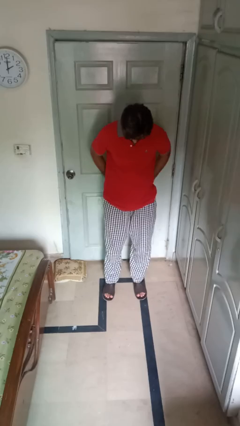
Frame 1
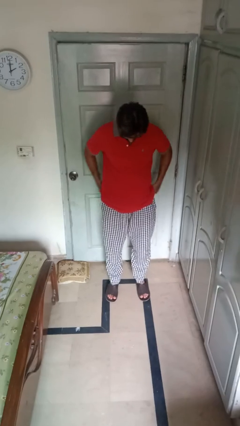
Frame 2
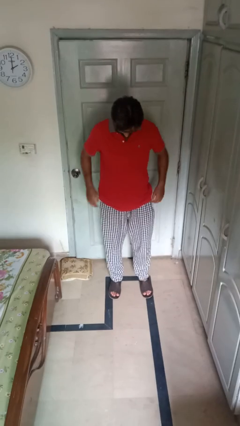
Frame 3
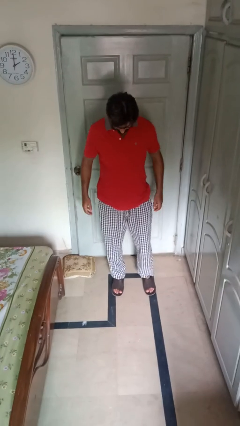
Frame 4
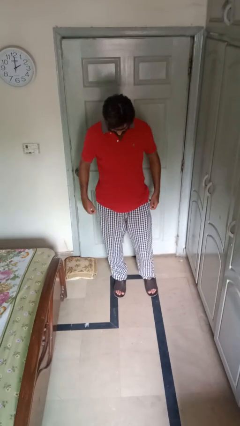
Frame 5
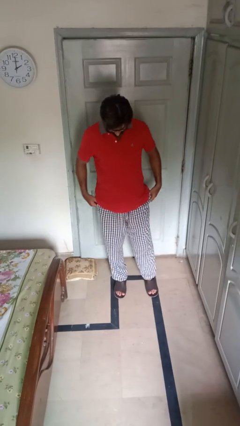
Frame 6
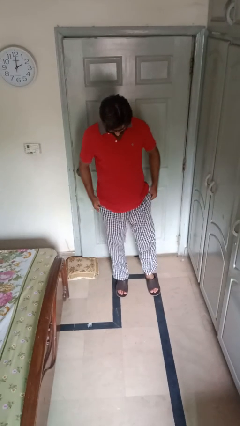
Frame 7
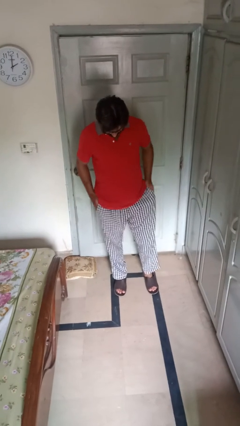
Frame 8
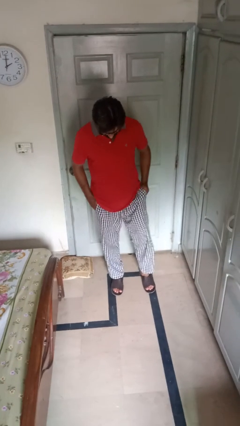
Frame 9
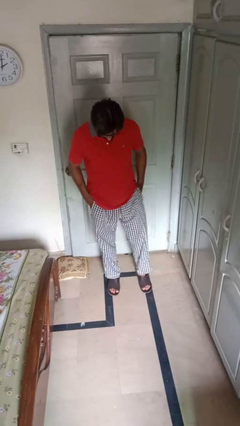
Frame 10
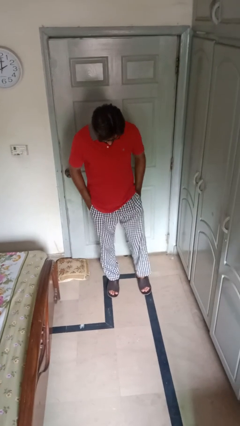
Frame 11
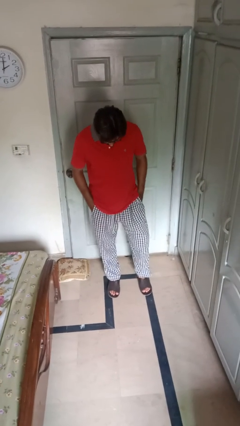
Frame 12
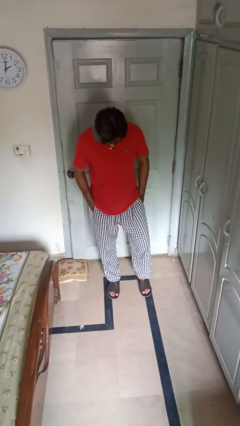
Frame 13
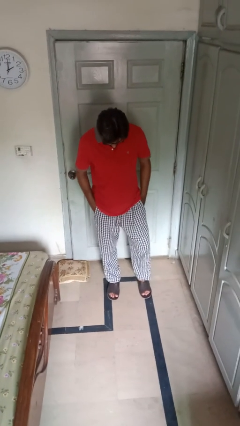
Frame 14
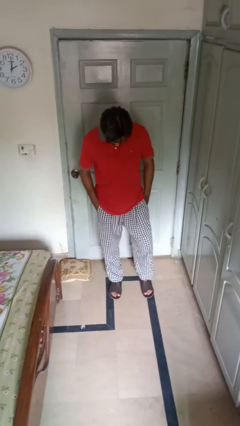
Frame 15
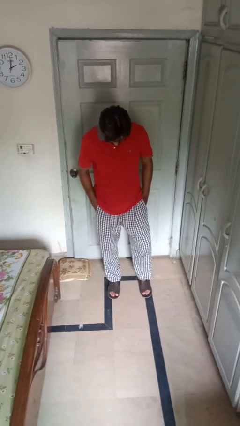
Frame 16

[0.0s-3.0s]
person puts hands in back pockets

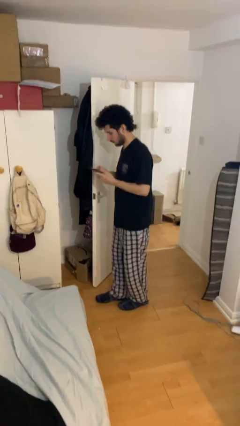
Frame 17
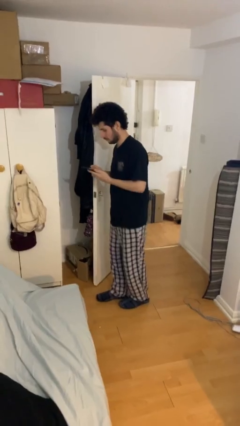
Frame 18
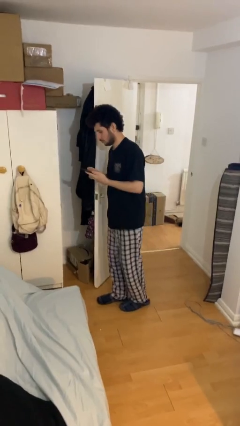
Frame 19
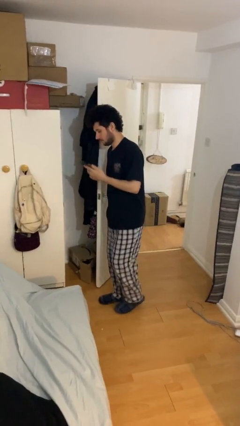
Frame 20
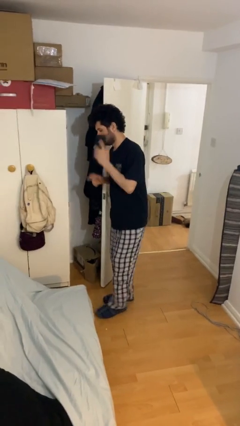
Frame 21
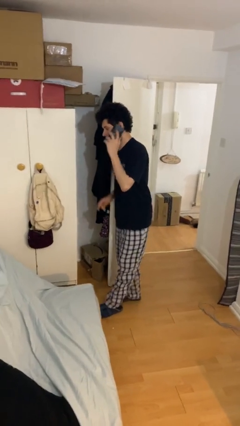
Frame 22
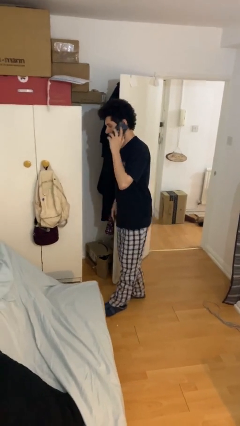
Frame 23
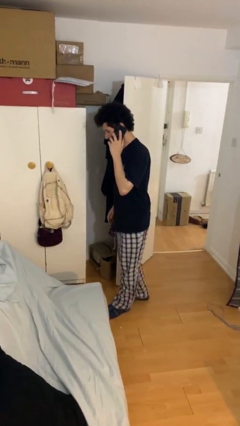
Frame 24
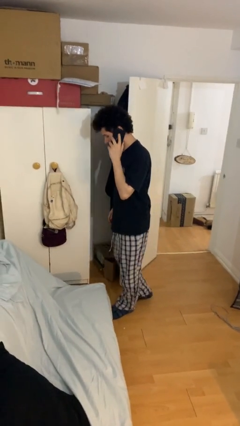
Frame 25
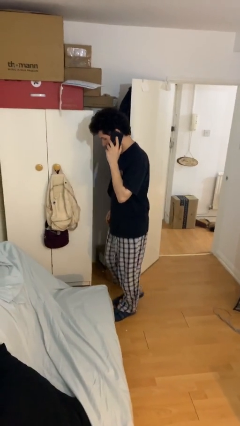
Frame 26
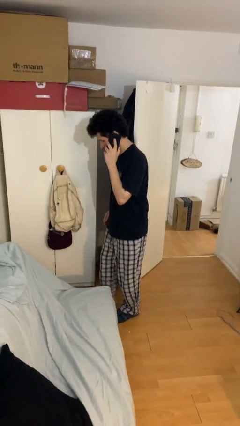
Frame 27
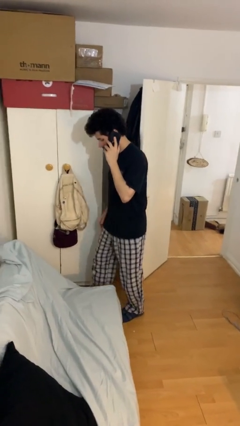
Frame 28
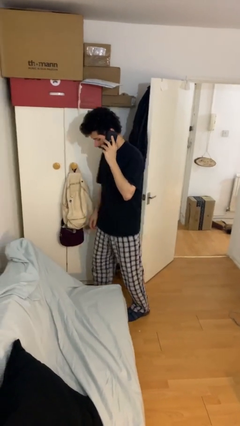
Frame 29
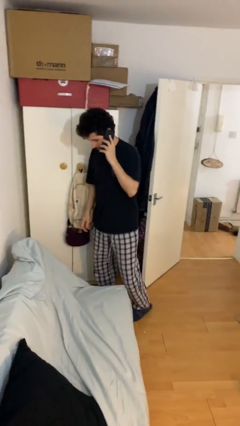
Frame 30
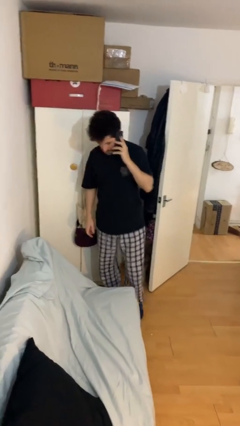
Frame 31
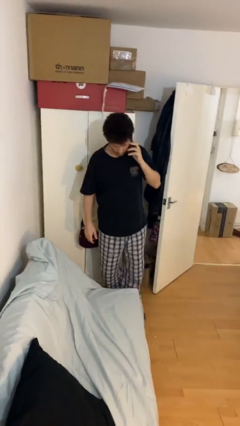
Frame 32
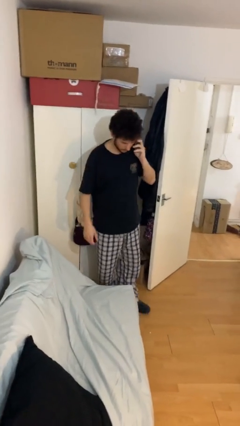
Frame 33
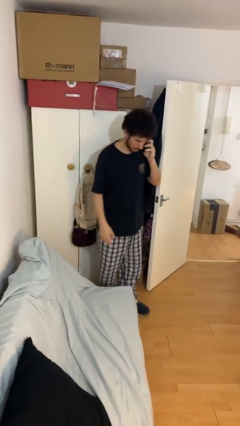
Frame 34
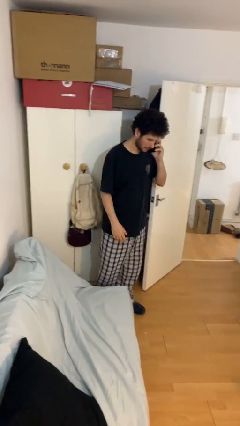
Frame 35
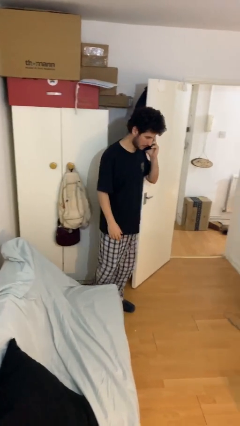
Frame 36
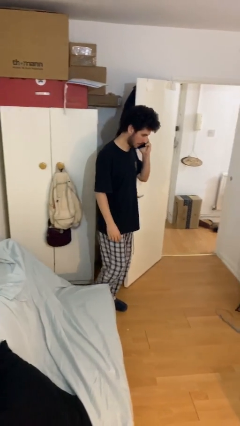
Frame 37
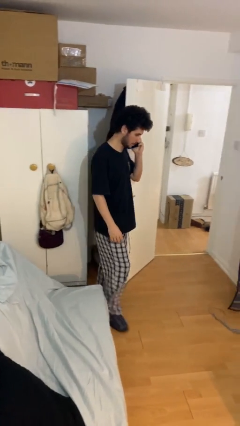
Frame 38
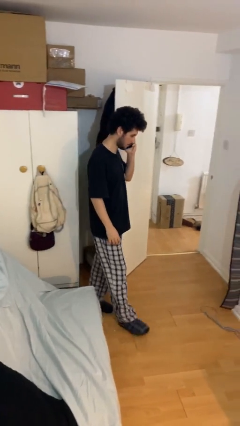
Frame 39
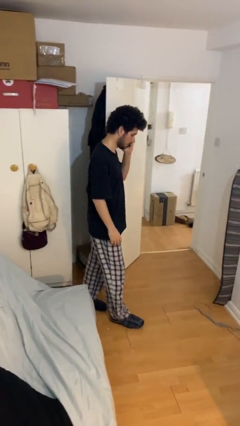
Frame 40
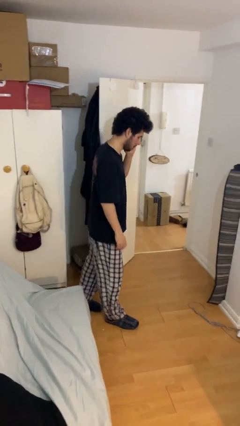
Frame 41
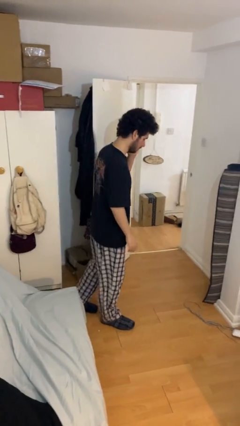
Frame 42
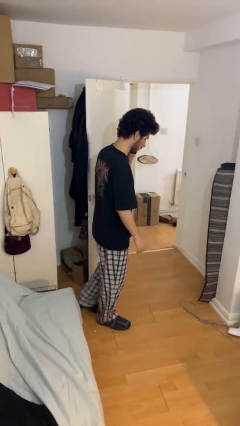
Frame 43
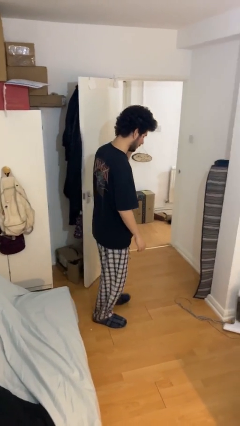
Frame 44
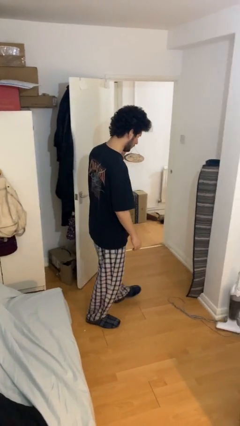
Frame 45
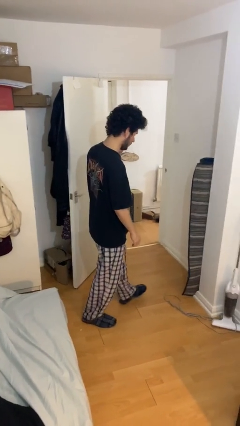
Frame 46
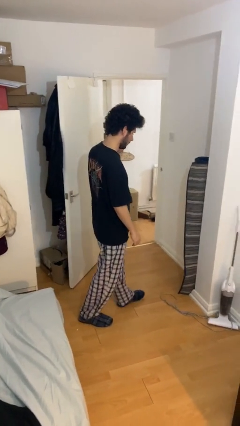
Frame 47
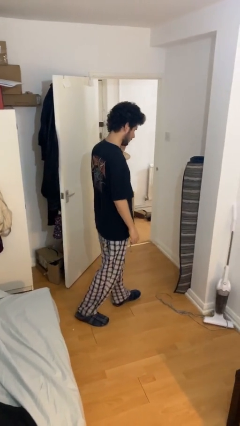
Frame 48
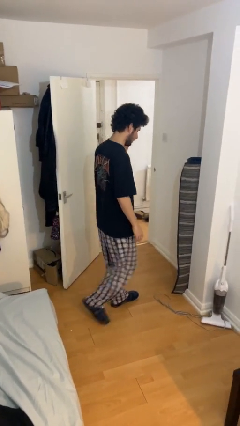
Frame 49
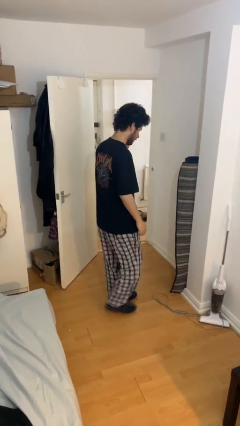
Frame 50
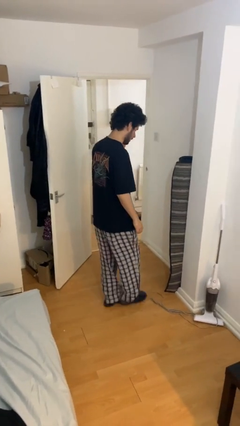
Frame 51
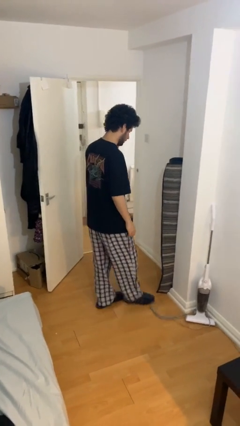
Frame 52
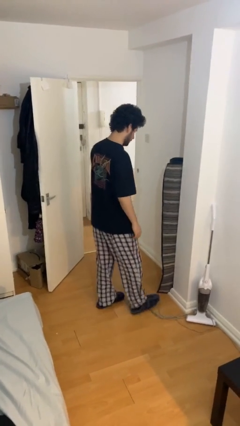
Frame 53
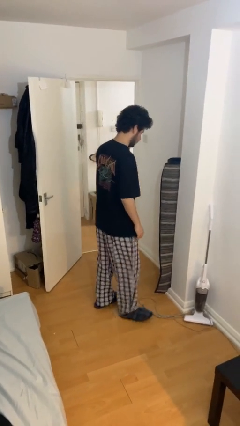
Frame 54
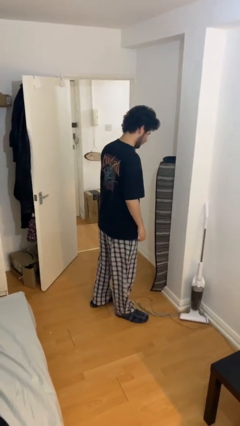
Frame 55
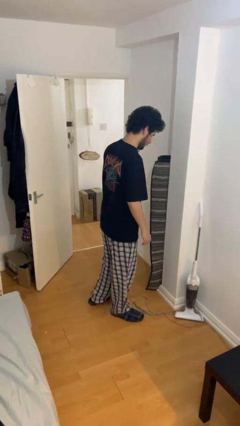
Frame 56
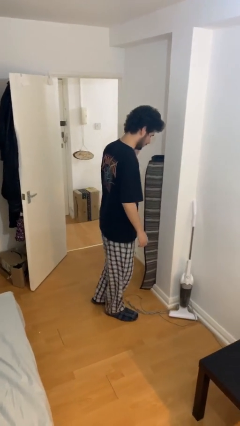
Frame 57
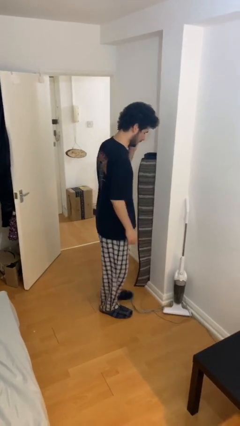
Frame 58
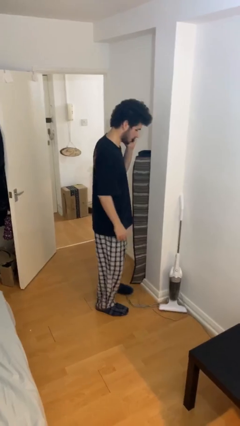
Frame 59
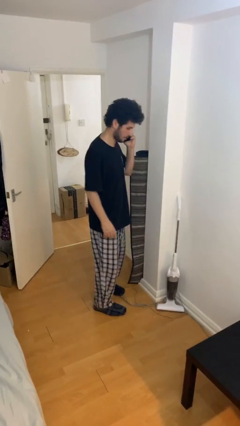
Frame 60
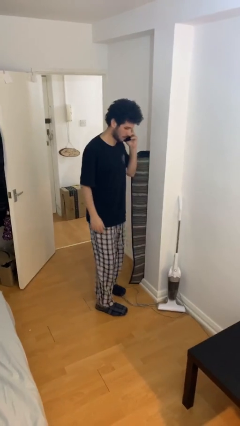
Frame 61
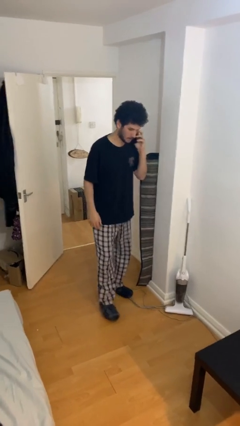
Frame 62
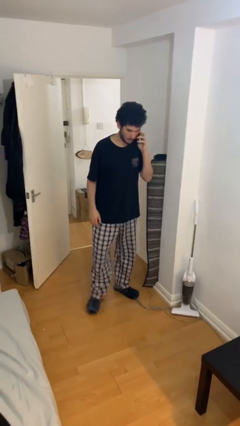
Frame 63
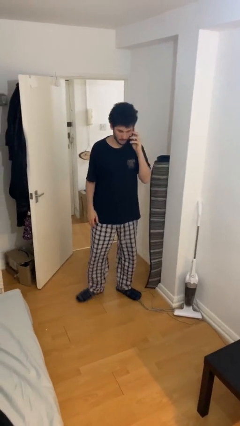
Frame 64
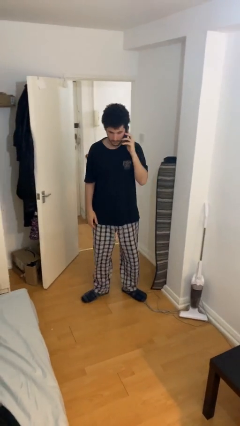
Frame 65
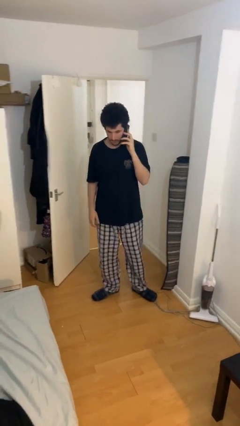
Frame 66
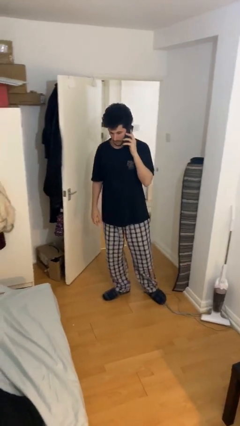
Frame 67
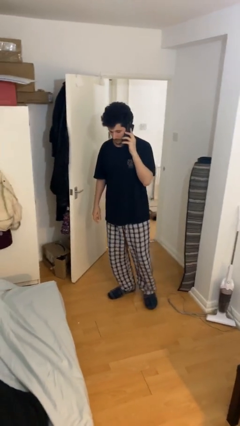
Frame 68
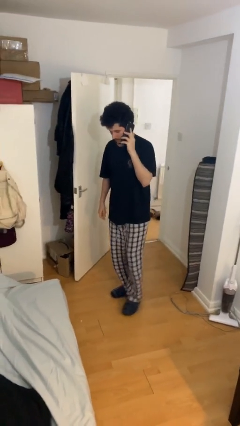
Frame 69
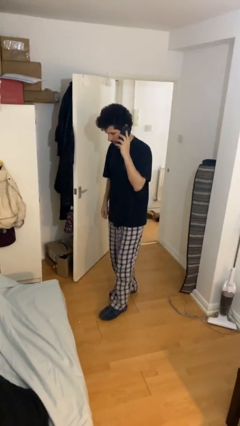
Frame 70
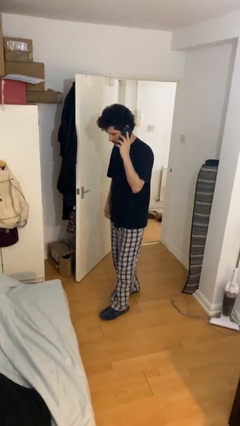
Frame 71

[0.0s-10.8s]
person talks on phone

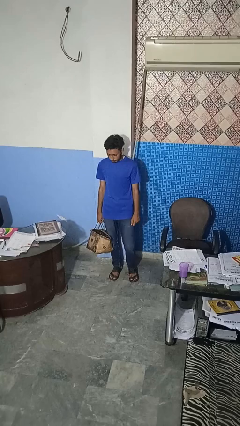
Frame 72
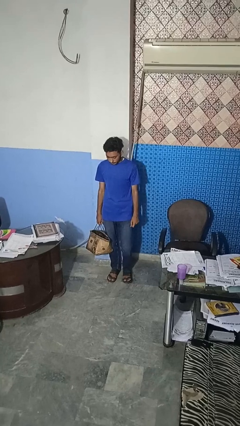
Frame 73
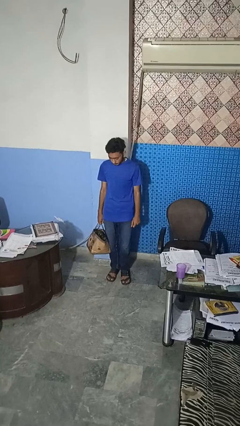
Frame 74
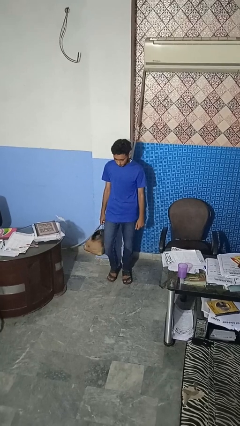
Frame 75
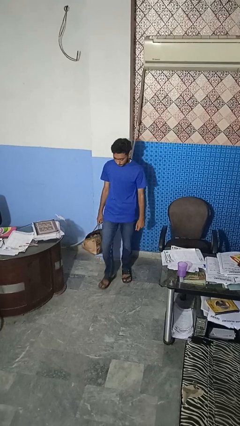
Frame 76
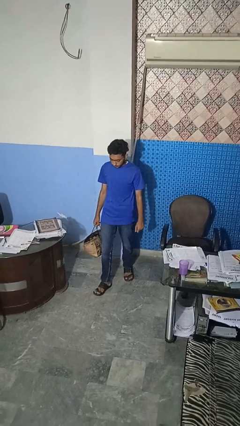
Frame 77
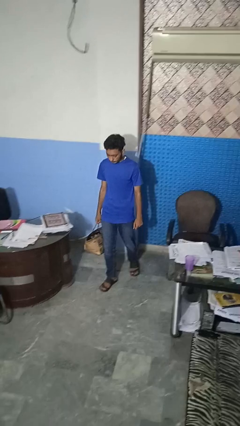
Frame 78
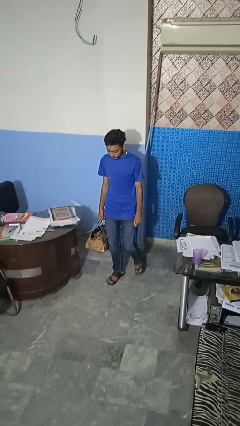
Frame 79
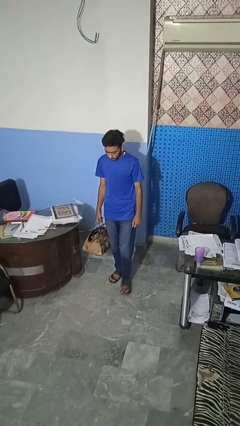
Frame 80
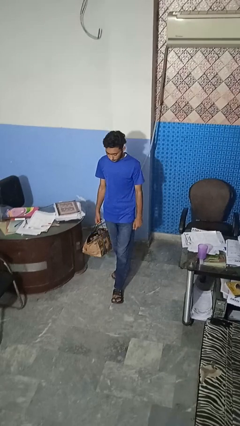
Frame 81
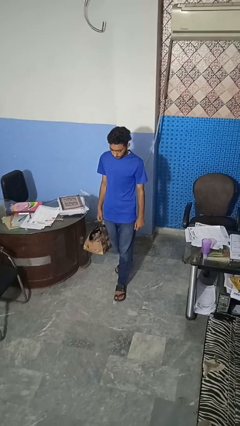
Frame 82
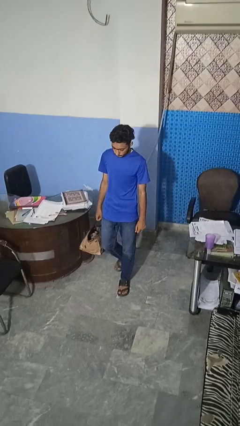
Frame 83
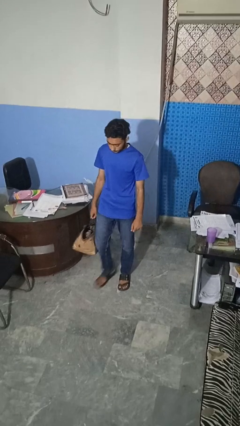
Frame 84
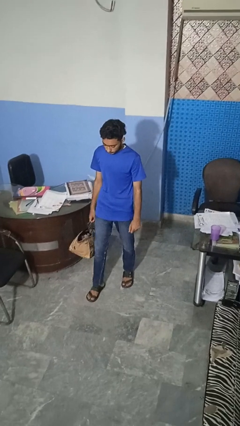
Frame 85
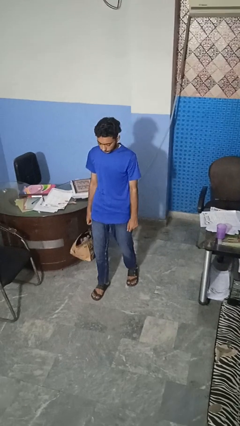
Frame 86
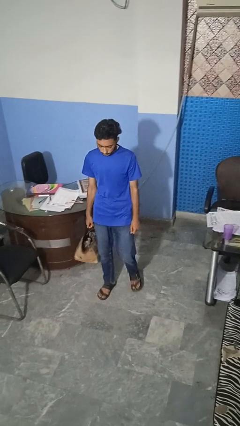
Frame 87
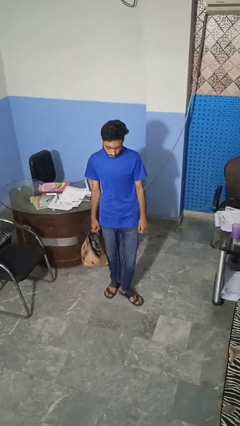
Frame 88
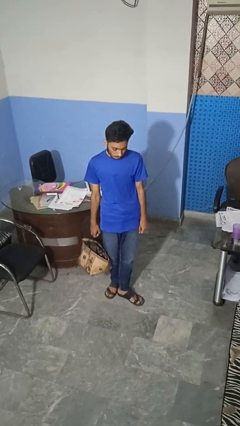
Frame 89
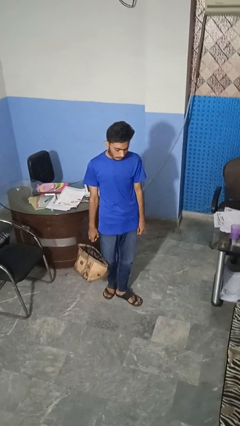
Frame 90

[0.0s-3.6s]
person carries groceries

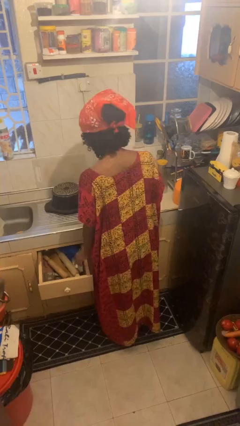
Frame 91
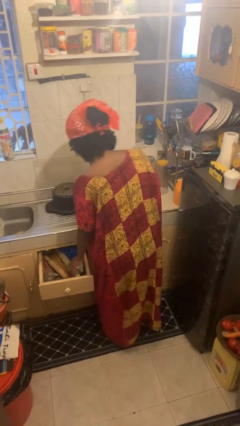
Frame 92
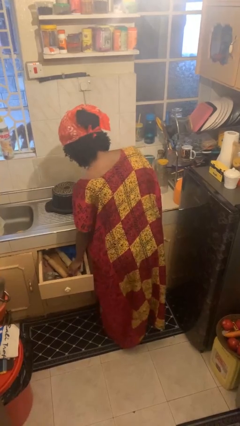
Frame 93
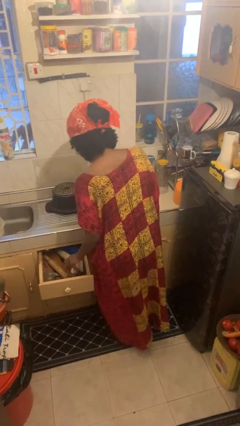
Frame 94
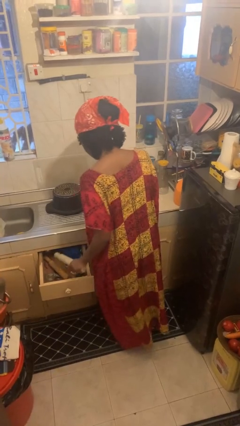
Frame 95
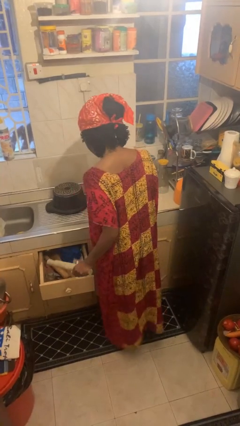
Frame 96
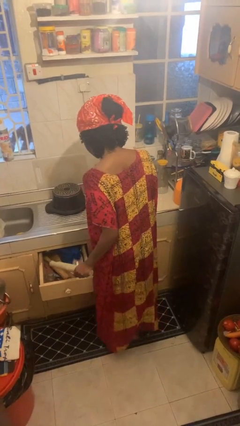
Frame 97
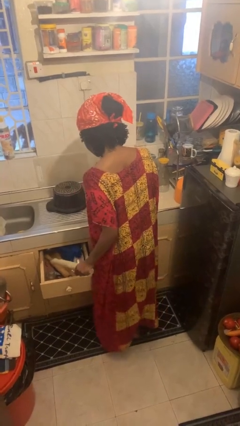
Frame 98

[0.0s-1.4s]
person takes object from kitchen drawer
